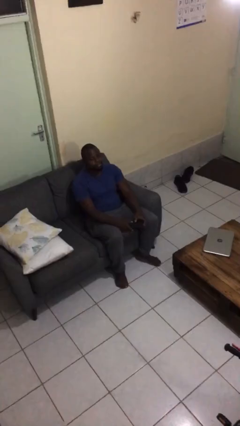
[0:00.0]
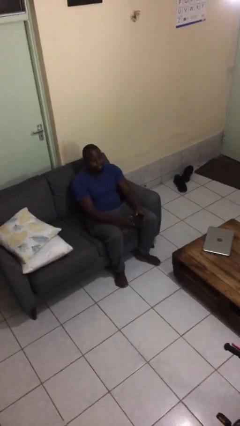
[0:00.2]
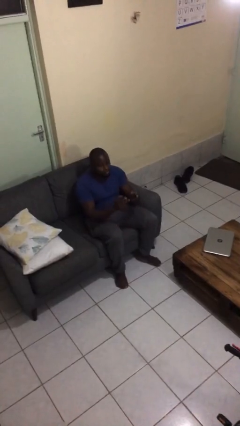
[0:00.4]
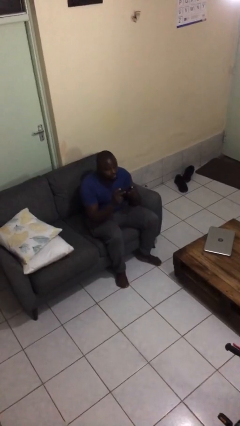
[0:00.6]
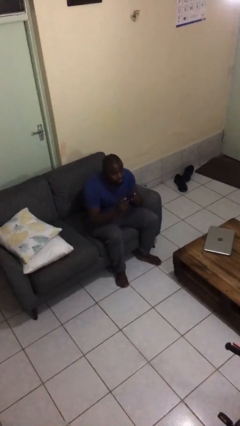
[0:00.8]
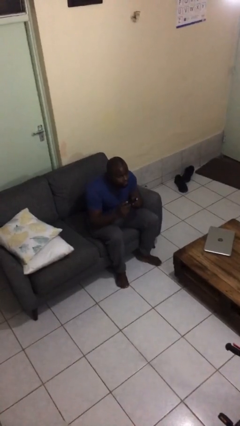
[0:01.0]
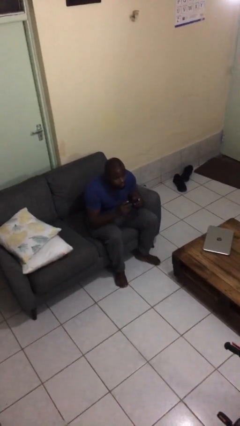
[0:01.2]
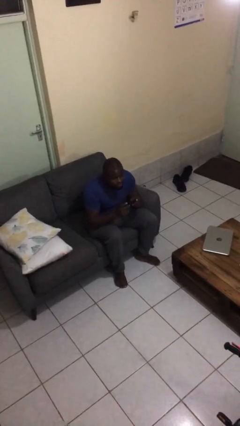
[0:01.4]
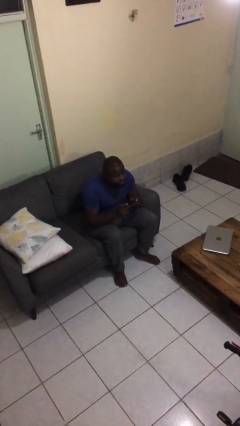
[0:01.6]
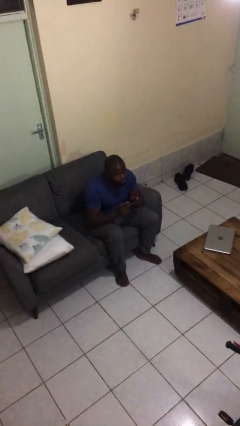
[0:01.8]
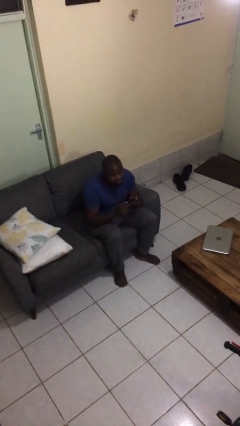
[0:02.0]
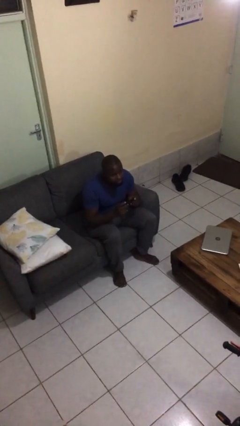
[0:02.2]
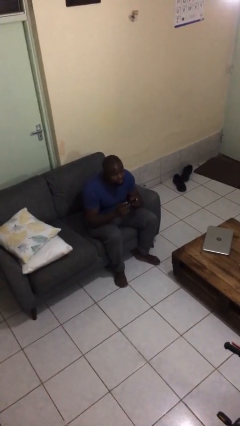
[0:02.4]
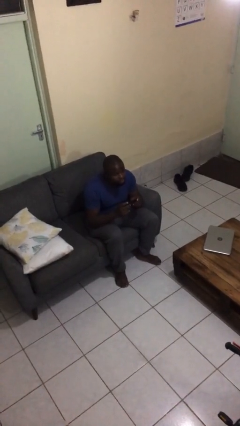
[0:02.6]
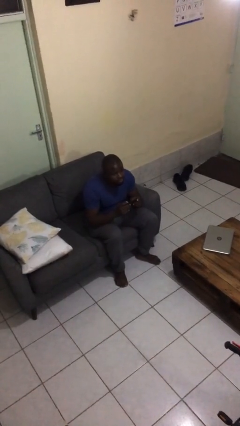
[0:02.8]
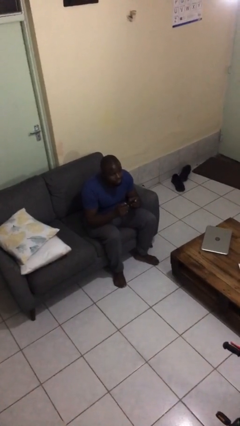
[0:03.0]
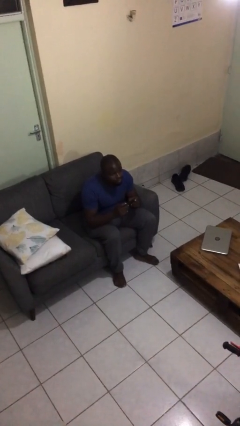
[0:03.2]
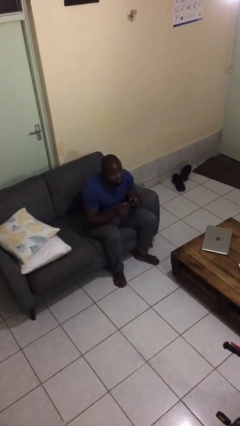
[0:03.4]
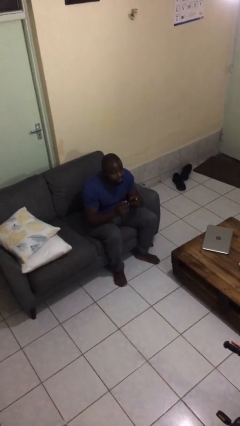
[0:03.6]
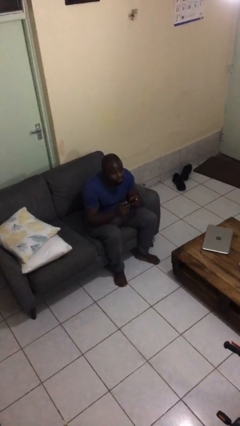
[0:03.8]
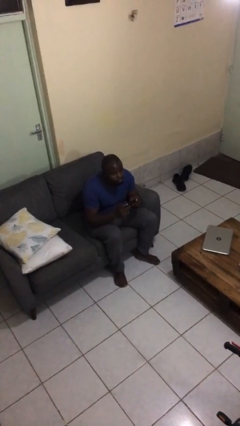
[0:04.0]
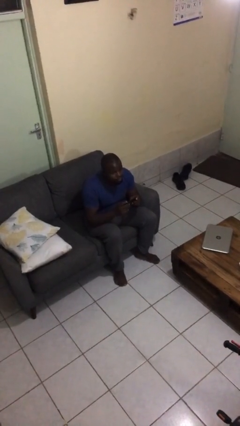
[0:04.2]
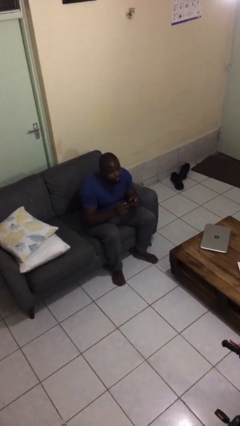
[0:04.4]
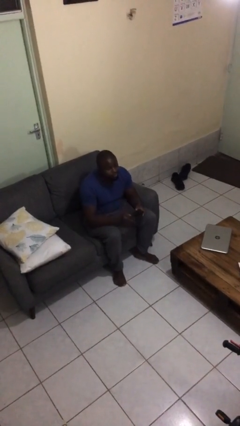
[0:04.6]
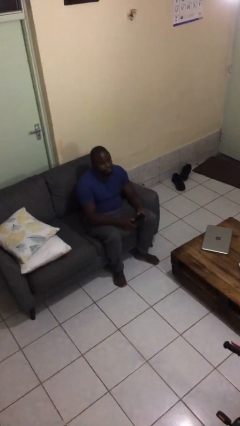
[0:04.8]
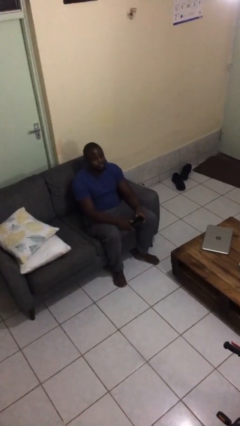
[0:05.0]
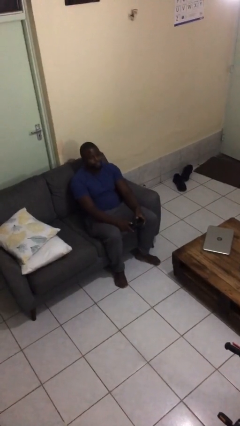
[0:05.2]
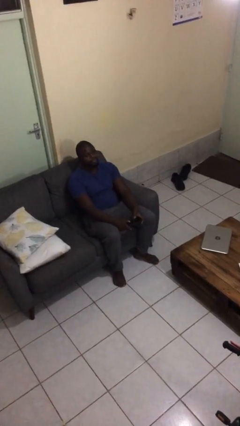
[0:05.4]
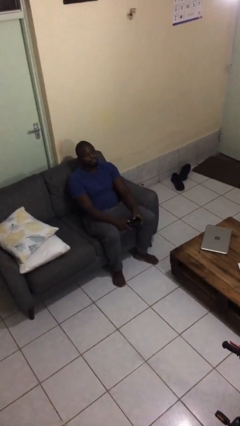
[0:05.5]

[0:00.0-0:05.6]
person interacts with handheld game

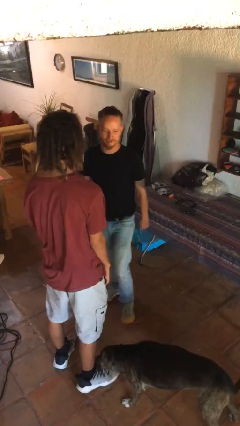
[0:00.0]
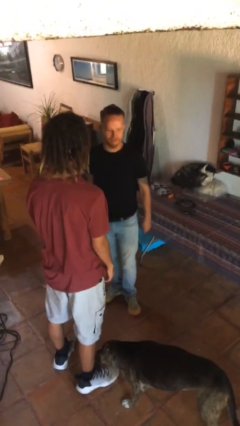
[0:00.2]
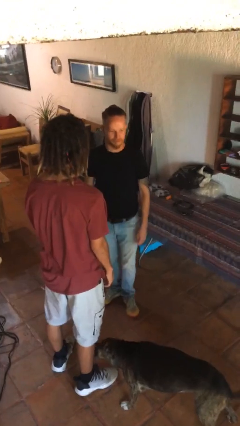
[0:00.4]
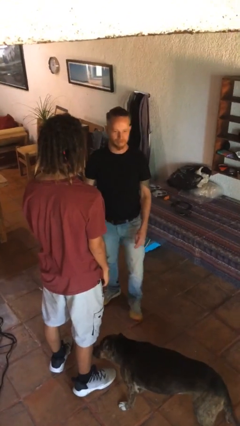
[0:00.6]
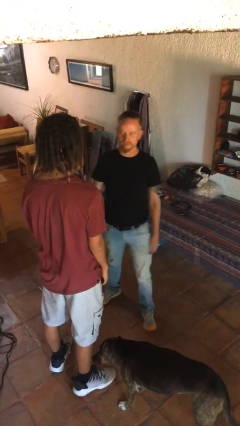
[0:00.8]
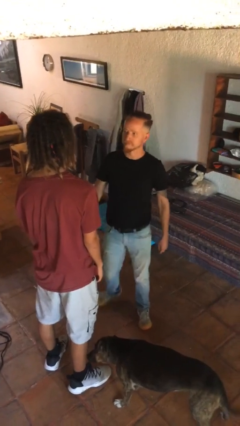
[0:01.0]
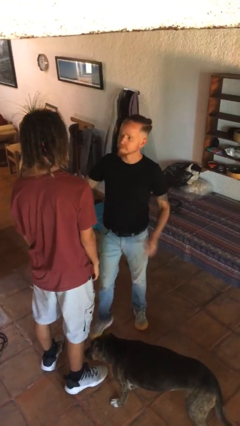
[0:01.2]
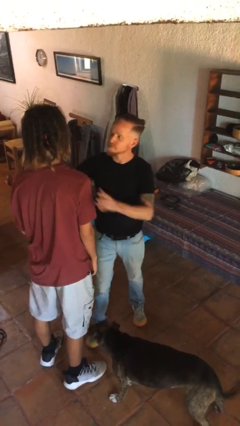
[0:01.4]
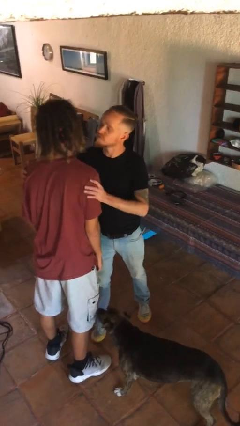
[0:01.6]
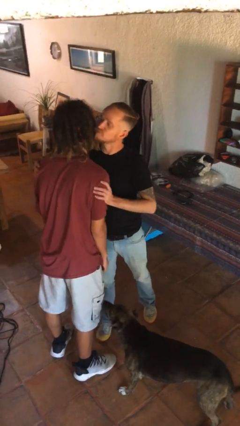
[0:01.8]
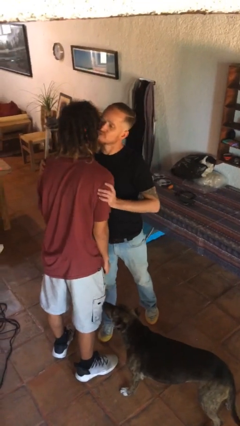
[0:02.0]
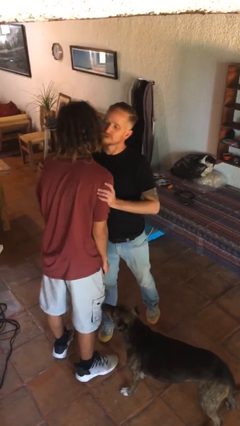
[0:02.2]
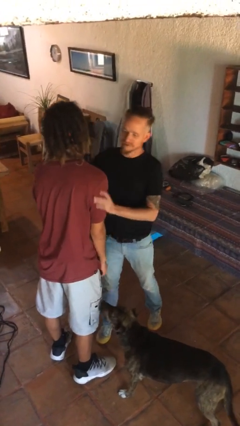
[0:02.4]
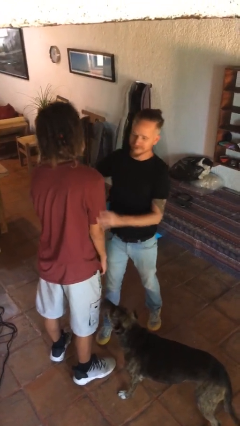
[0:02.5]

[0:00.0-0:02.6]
person kisses cheek of person

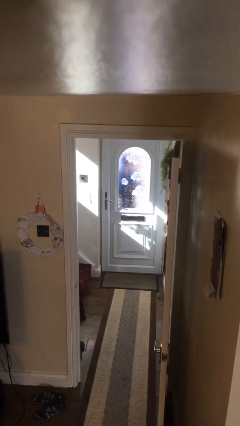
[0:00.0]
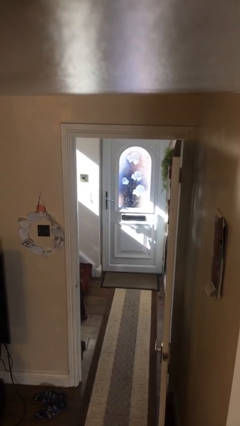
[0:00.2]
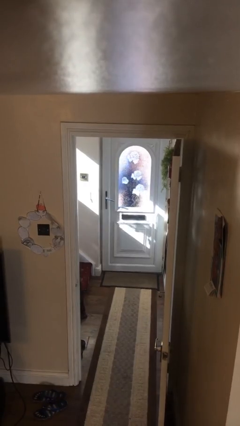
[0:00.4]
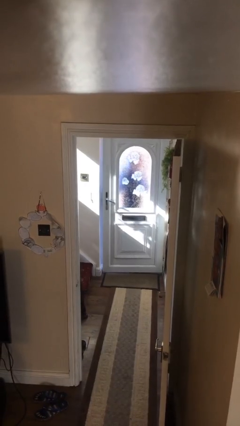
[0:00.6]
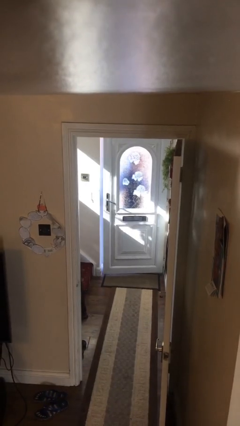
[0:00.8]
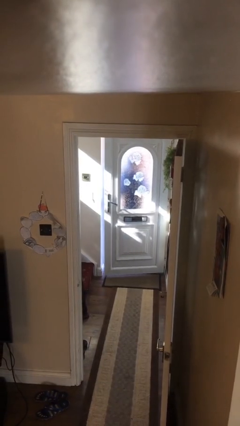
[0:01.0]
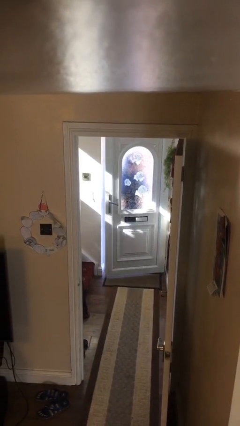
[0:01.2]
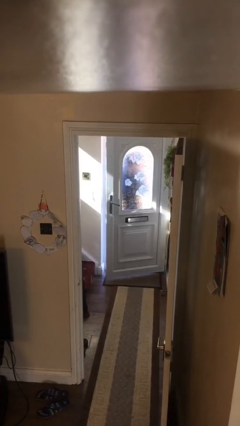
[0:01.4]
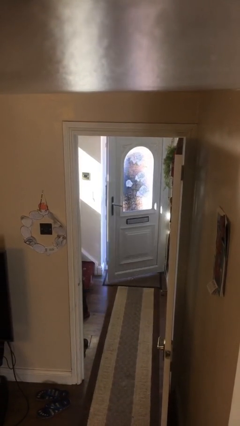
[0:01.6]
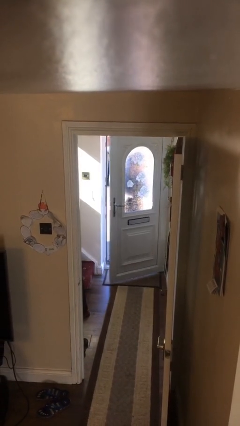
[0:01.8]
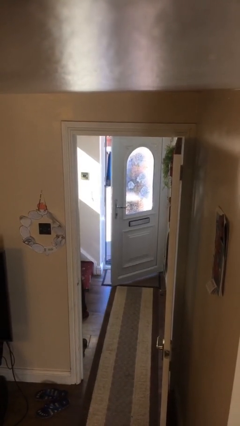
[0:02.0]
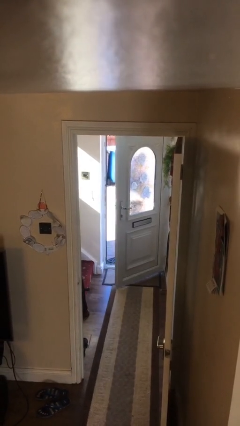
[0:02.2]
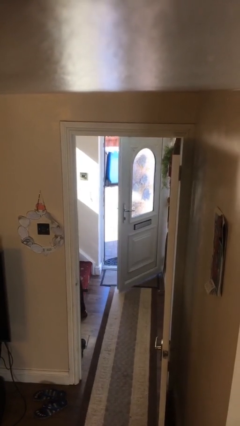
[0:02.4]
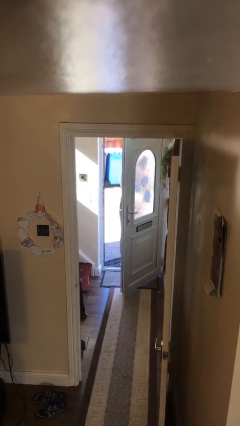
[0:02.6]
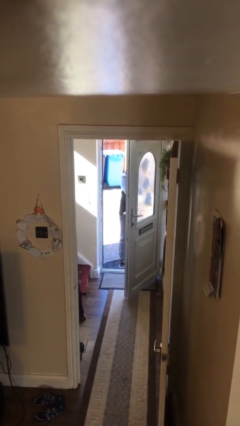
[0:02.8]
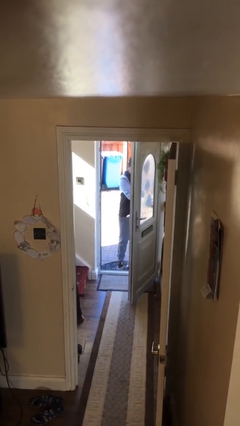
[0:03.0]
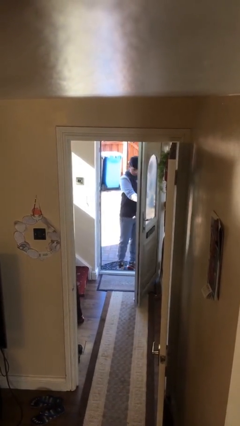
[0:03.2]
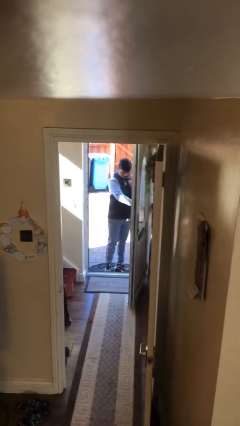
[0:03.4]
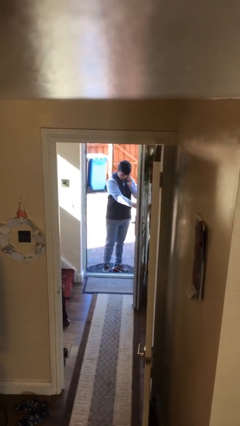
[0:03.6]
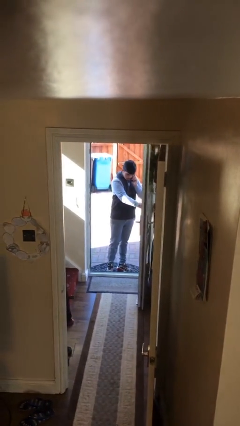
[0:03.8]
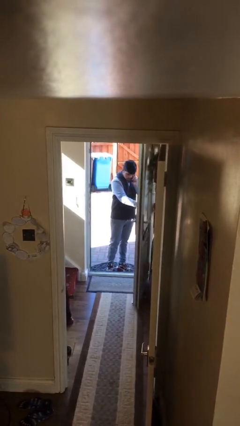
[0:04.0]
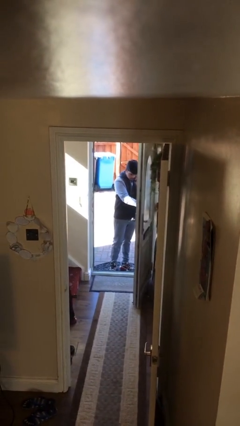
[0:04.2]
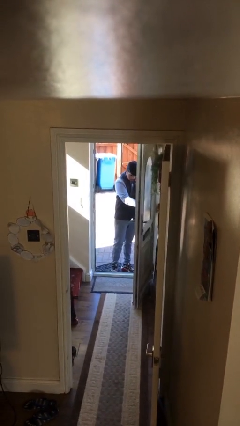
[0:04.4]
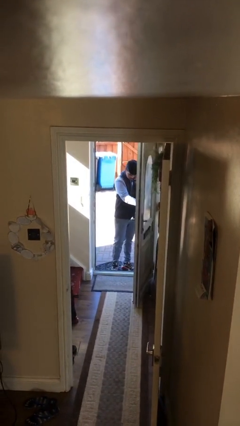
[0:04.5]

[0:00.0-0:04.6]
person opens facility door

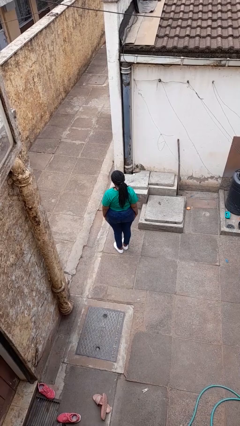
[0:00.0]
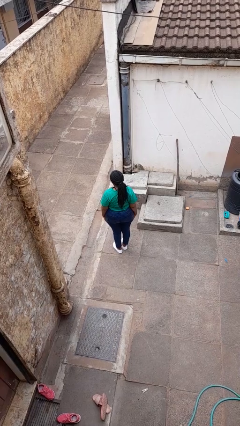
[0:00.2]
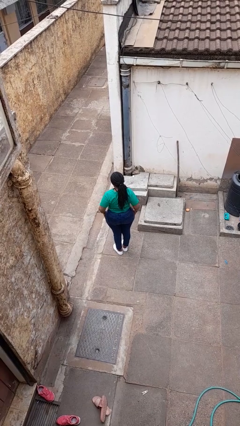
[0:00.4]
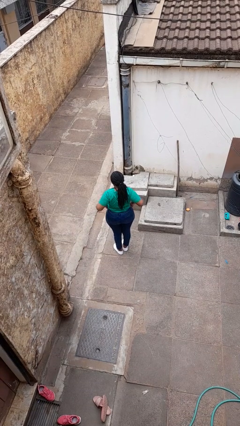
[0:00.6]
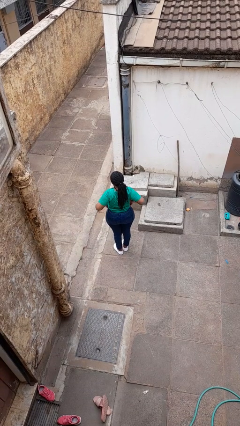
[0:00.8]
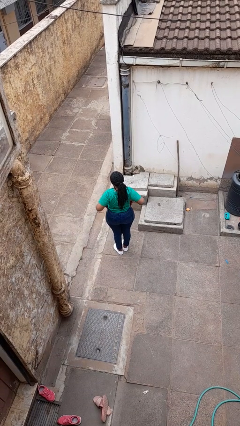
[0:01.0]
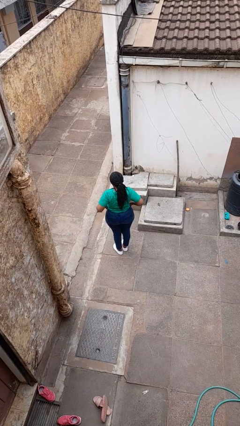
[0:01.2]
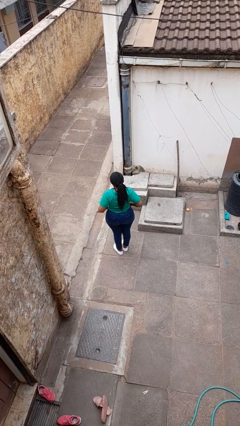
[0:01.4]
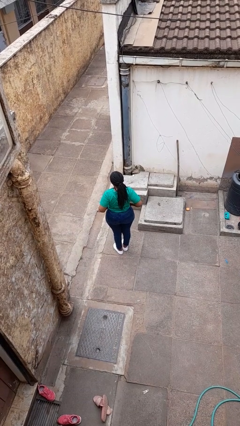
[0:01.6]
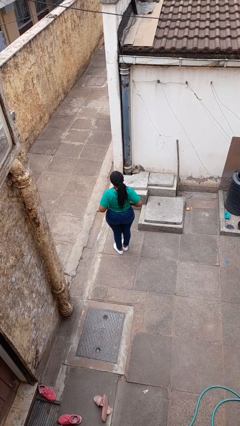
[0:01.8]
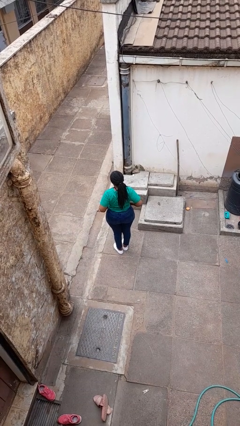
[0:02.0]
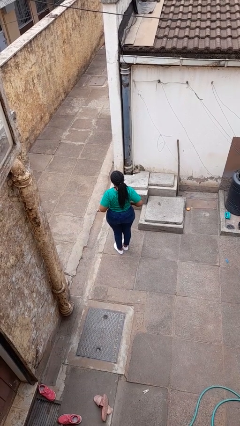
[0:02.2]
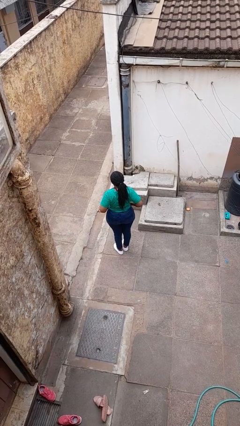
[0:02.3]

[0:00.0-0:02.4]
person puts hands in back pockets

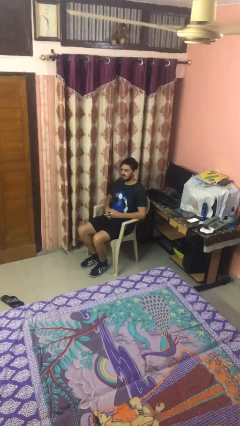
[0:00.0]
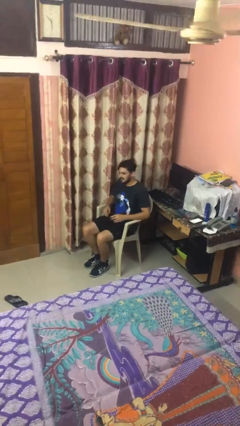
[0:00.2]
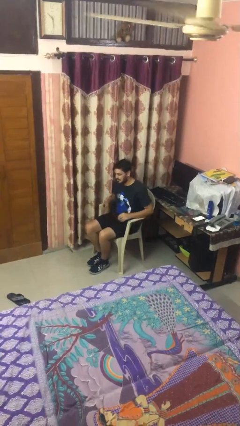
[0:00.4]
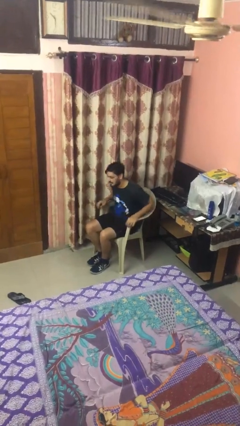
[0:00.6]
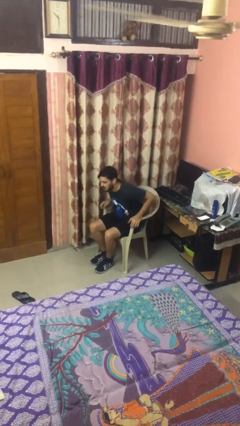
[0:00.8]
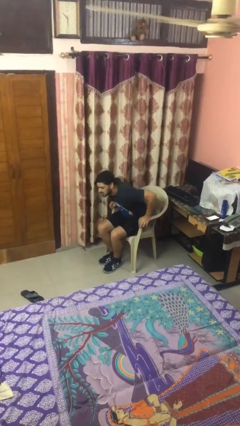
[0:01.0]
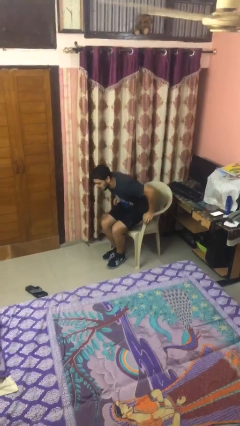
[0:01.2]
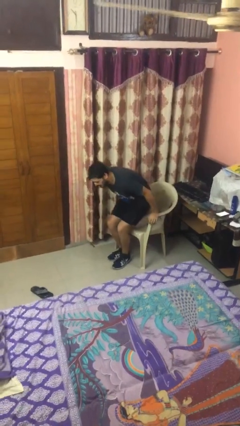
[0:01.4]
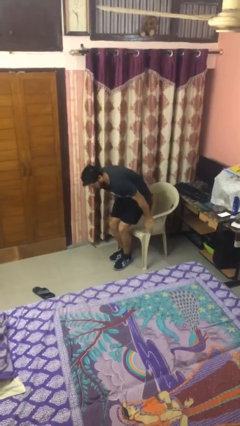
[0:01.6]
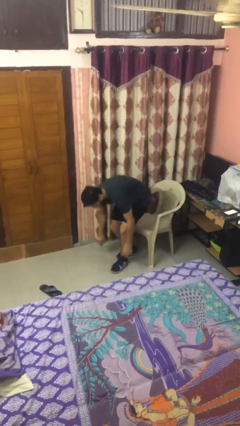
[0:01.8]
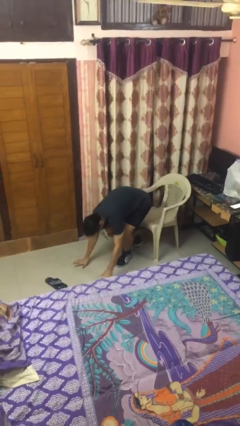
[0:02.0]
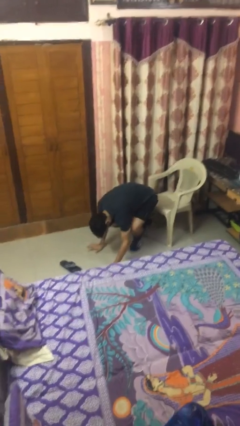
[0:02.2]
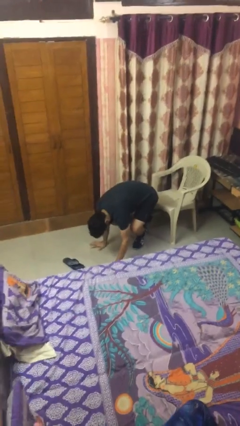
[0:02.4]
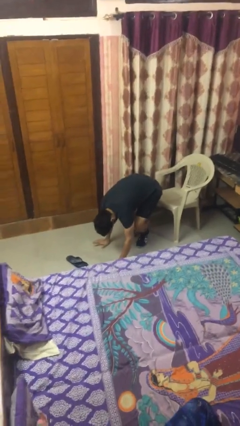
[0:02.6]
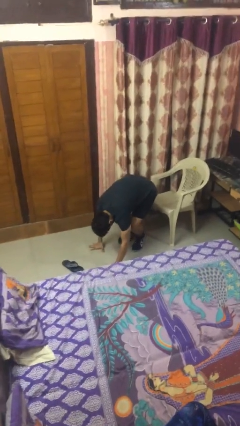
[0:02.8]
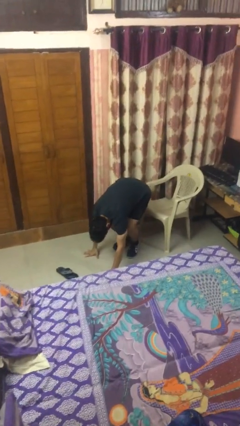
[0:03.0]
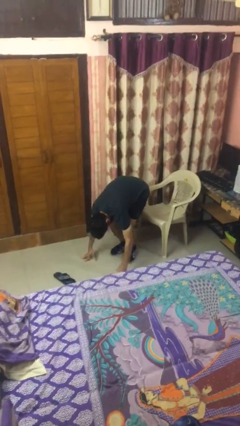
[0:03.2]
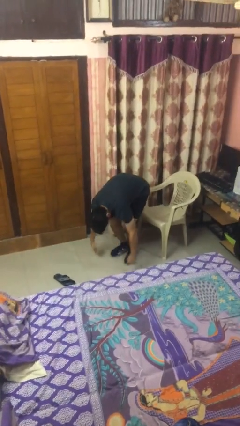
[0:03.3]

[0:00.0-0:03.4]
person falls from chair
